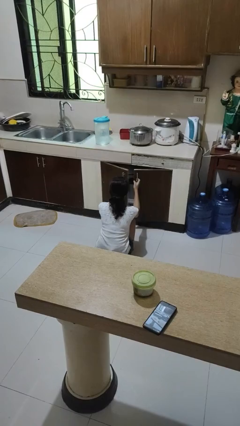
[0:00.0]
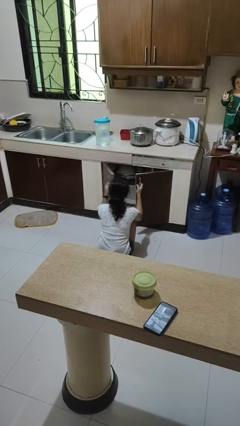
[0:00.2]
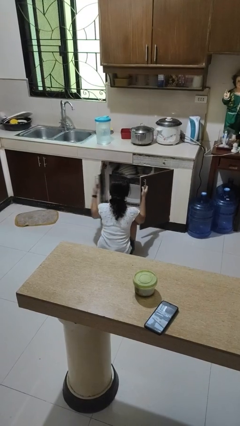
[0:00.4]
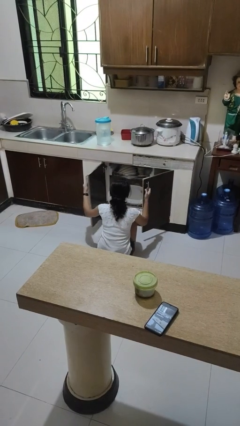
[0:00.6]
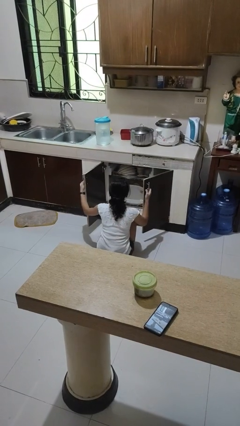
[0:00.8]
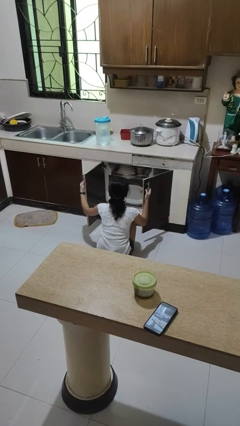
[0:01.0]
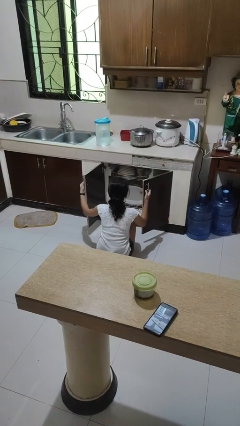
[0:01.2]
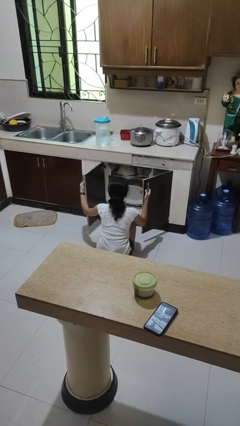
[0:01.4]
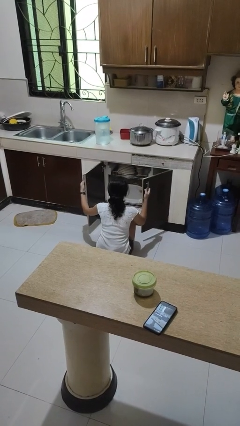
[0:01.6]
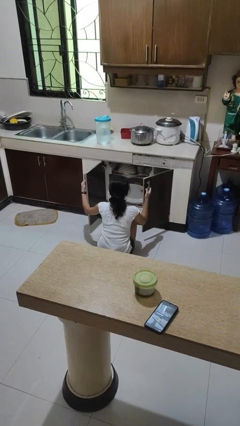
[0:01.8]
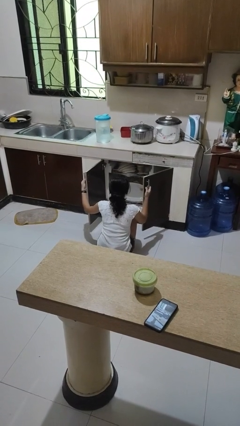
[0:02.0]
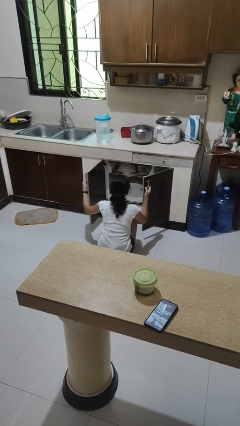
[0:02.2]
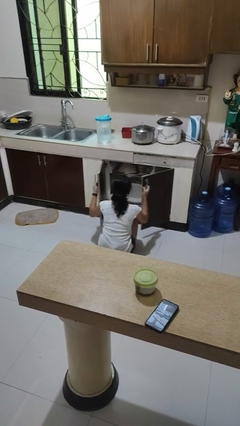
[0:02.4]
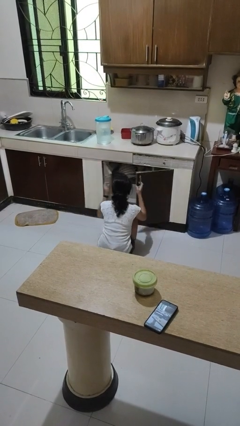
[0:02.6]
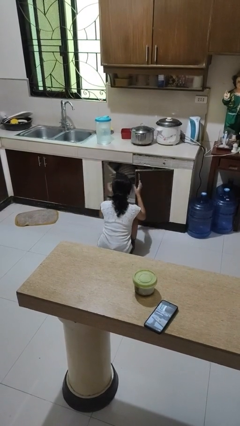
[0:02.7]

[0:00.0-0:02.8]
person opens dishwasher

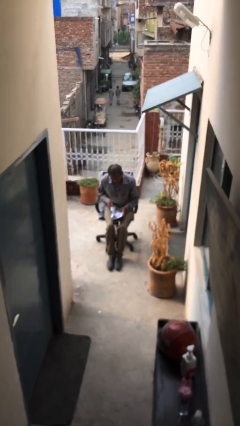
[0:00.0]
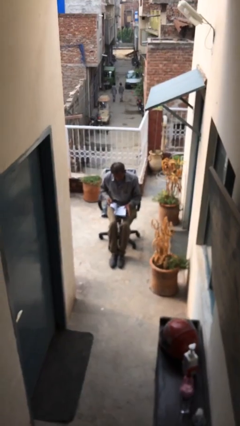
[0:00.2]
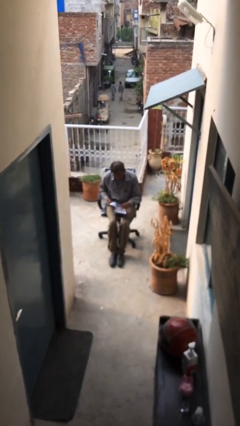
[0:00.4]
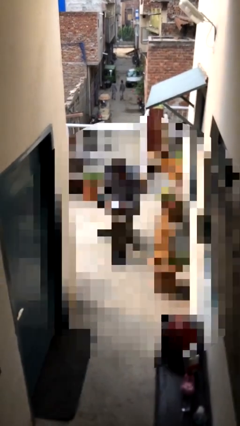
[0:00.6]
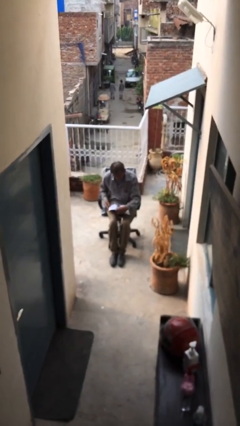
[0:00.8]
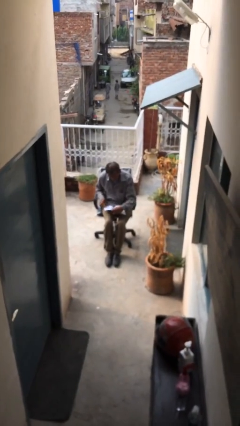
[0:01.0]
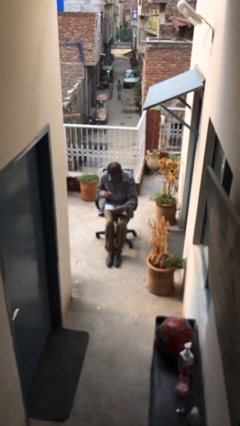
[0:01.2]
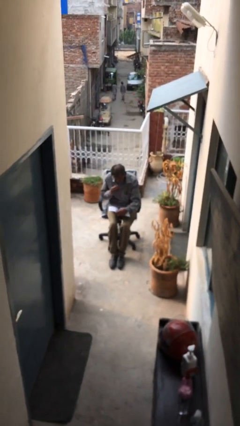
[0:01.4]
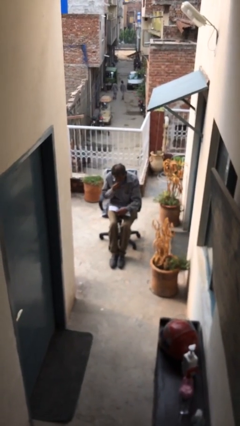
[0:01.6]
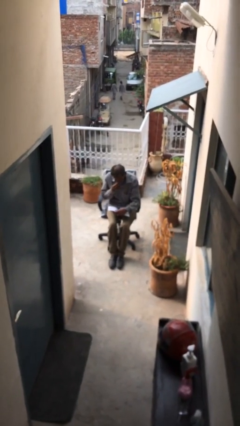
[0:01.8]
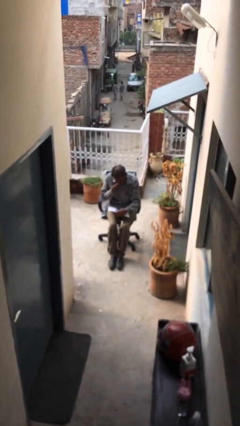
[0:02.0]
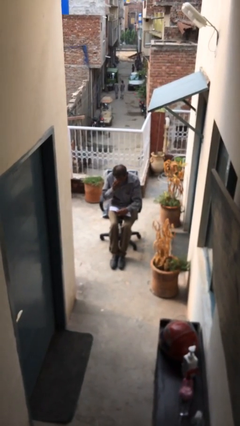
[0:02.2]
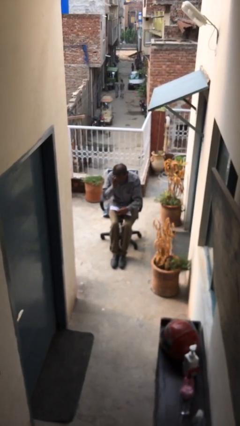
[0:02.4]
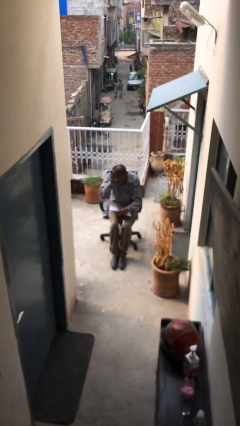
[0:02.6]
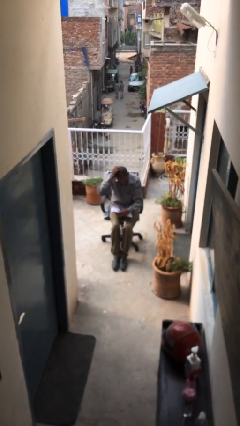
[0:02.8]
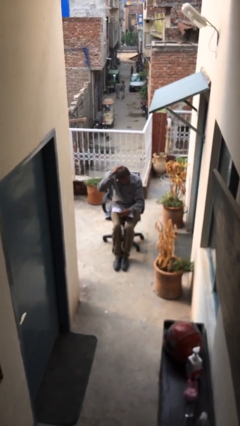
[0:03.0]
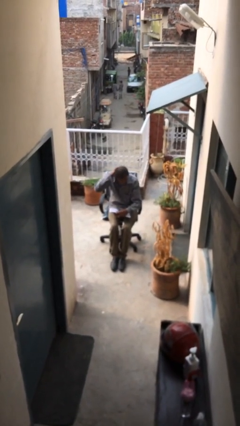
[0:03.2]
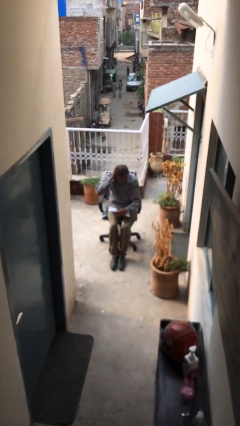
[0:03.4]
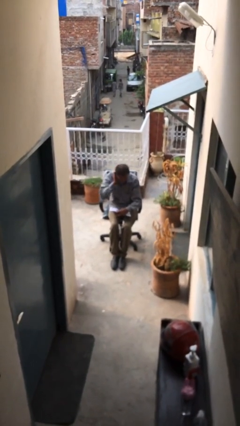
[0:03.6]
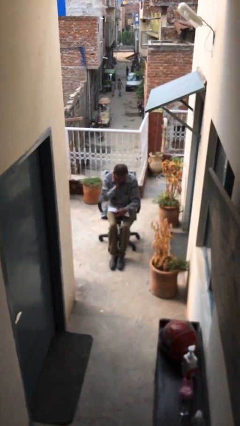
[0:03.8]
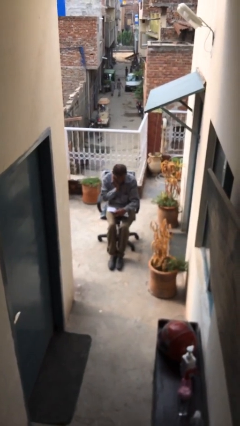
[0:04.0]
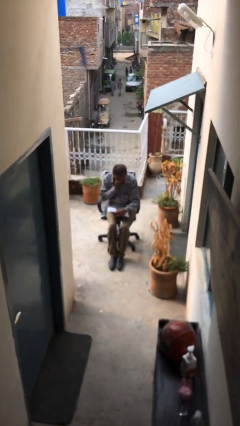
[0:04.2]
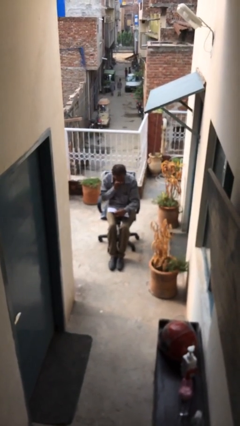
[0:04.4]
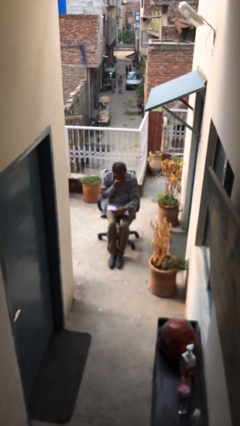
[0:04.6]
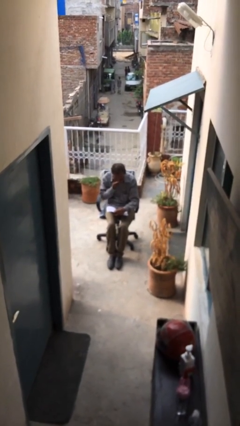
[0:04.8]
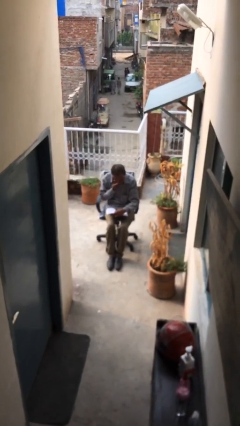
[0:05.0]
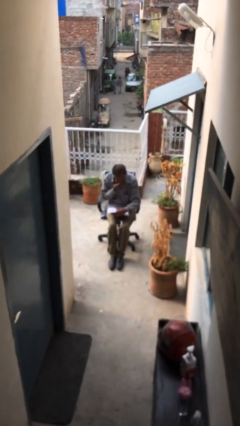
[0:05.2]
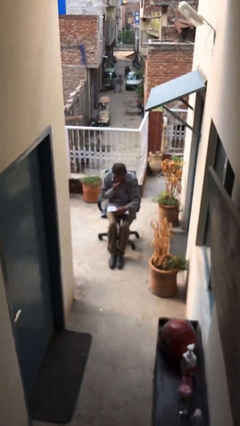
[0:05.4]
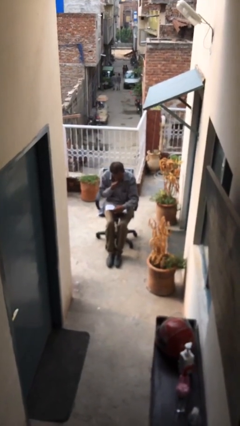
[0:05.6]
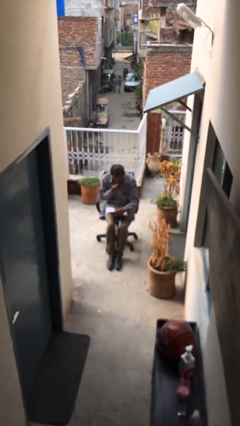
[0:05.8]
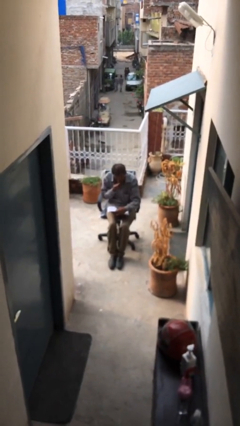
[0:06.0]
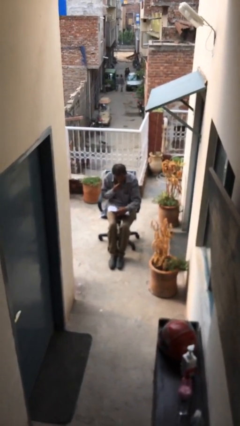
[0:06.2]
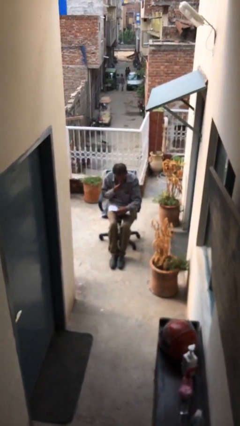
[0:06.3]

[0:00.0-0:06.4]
person reads document

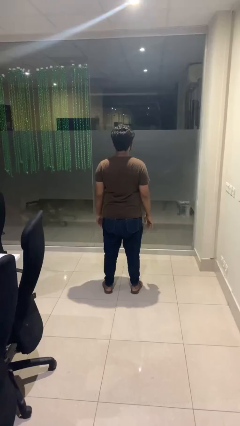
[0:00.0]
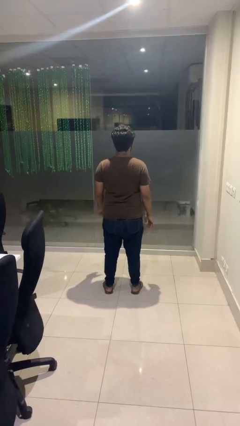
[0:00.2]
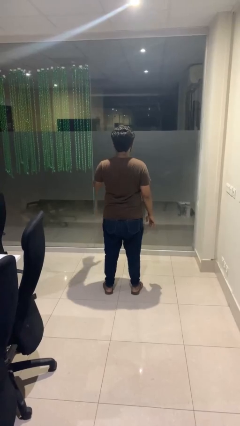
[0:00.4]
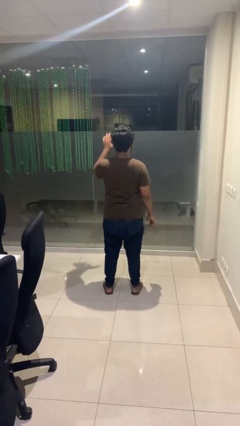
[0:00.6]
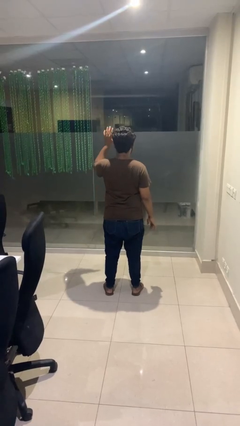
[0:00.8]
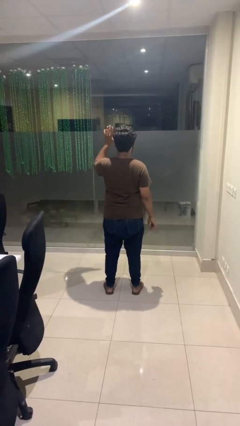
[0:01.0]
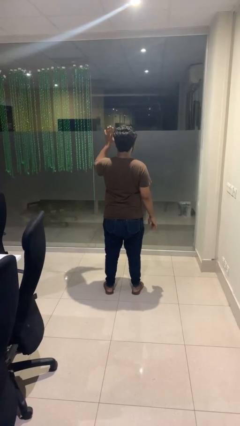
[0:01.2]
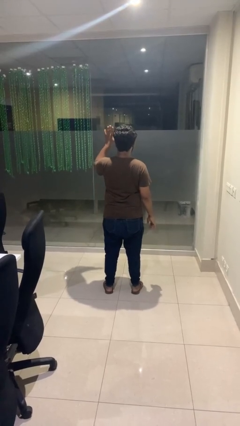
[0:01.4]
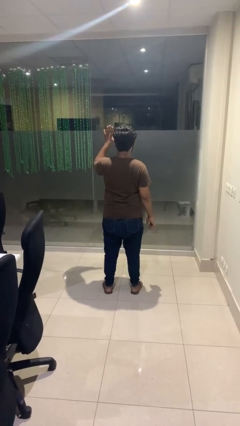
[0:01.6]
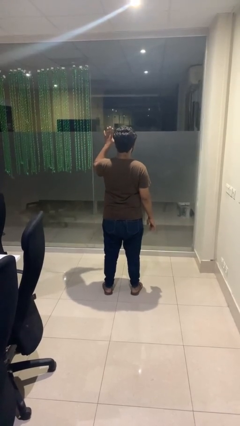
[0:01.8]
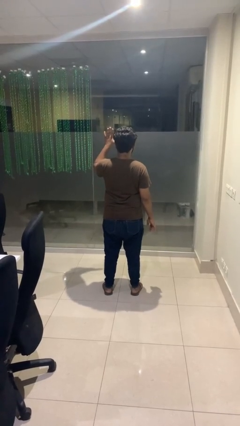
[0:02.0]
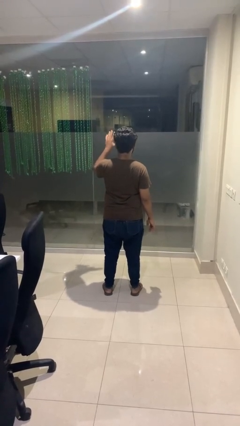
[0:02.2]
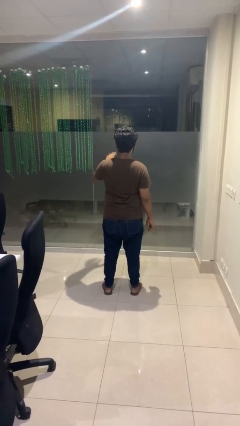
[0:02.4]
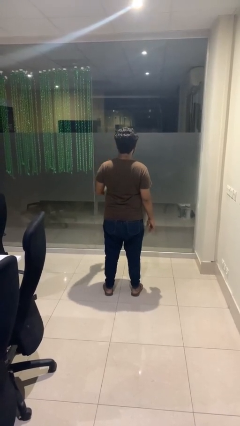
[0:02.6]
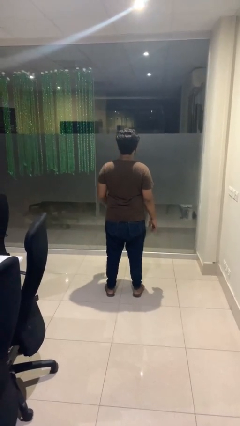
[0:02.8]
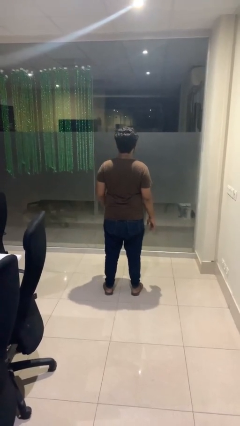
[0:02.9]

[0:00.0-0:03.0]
person gestures number five

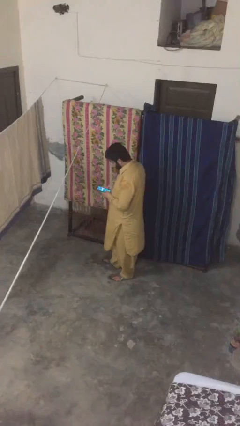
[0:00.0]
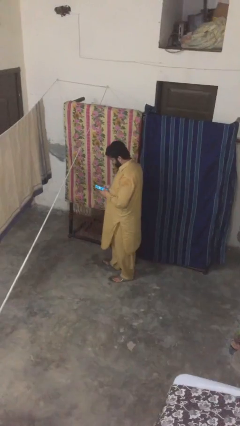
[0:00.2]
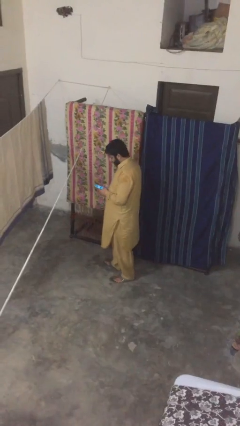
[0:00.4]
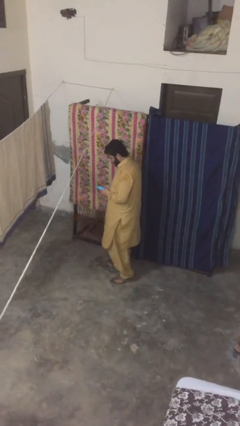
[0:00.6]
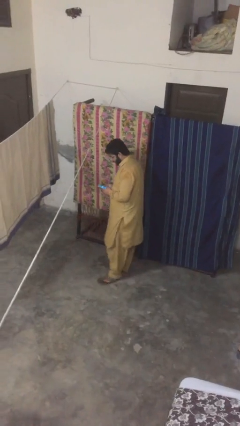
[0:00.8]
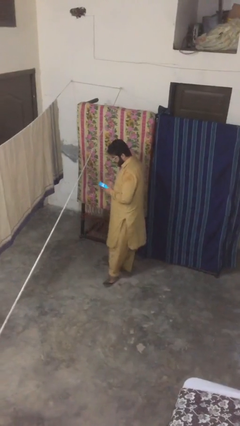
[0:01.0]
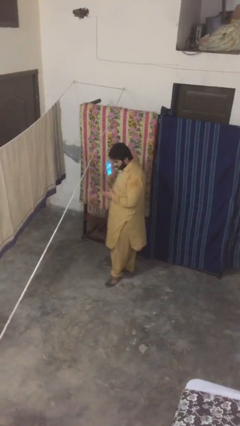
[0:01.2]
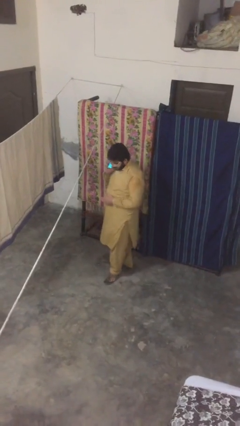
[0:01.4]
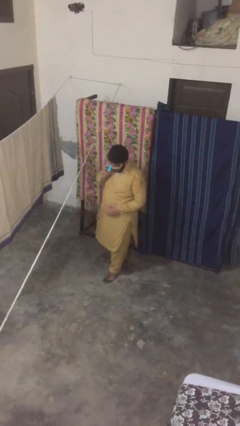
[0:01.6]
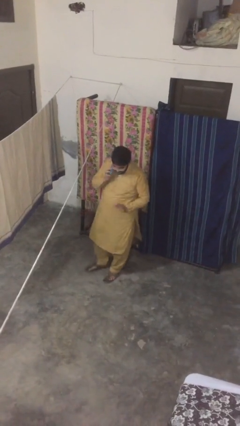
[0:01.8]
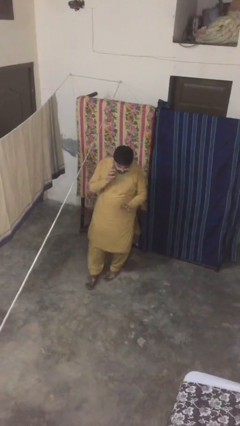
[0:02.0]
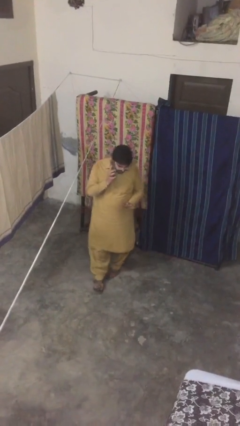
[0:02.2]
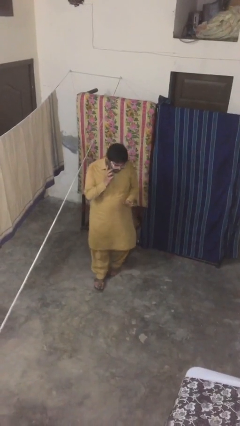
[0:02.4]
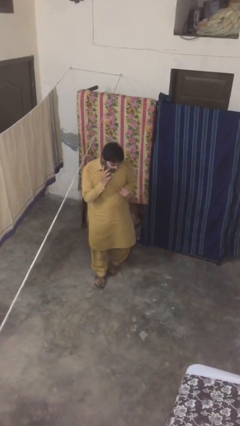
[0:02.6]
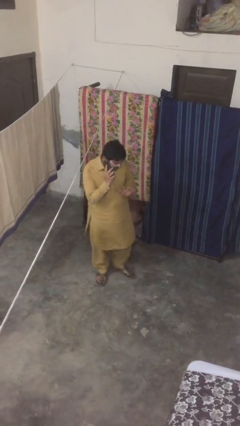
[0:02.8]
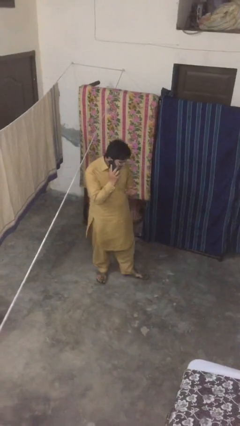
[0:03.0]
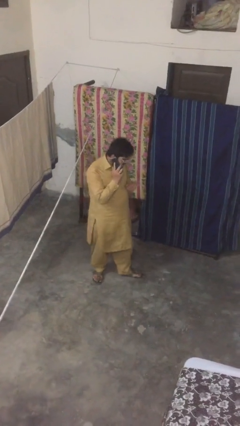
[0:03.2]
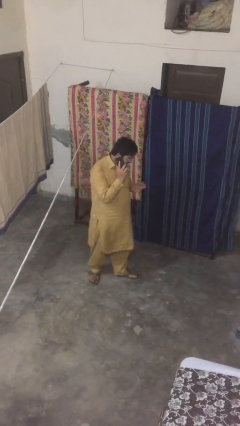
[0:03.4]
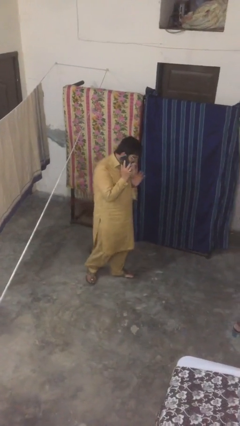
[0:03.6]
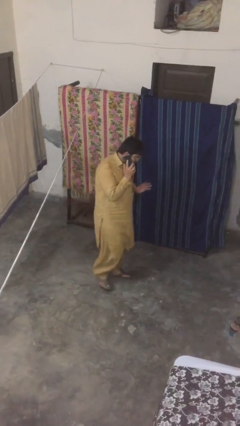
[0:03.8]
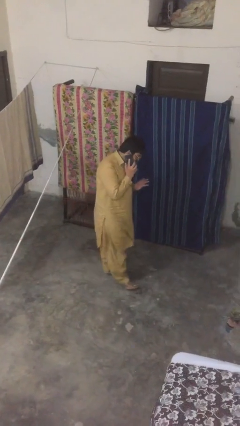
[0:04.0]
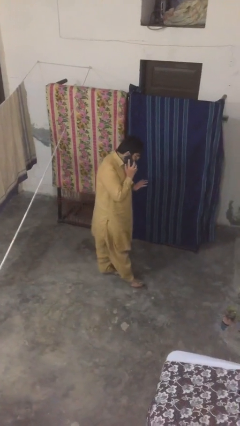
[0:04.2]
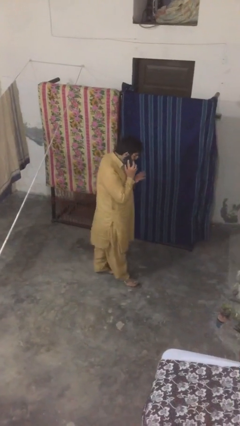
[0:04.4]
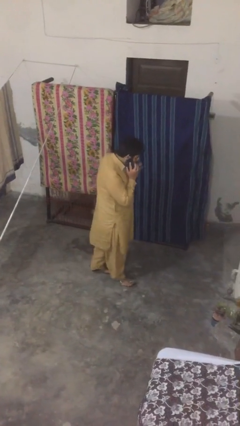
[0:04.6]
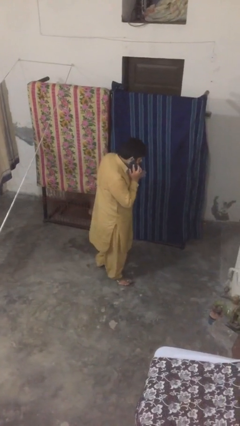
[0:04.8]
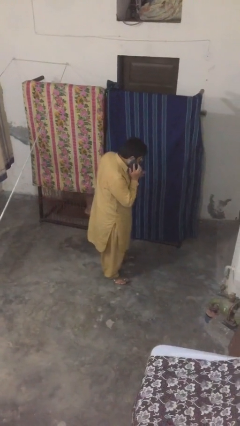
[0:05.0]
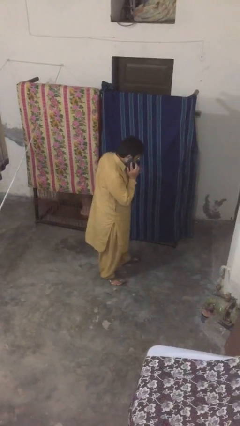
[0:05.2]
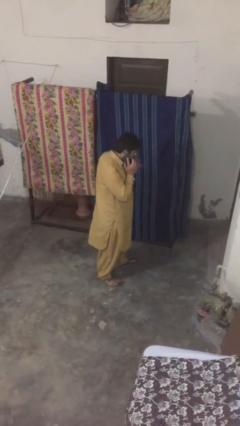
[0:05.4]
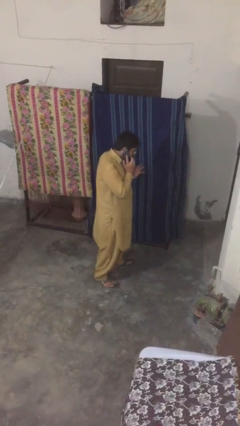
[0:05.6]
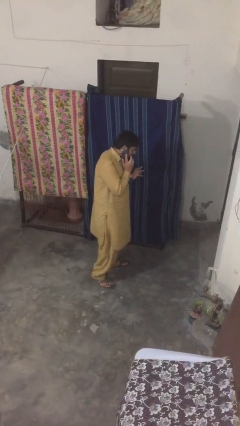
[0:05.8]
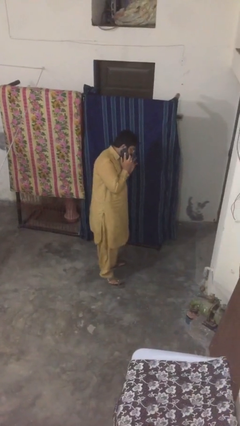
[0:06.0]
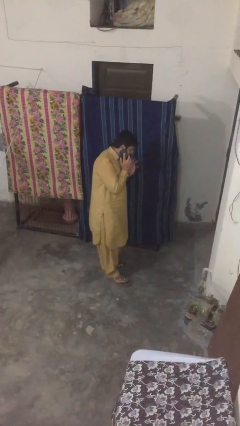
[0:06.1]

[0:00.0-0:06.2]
person talks on phone
